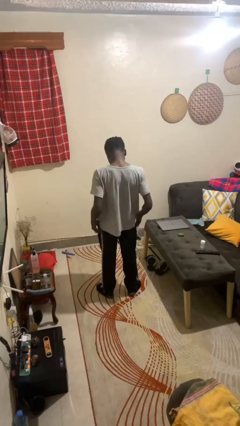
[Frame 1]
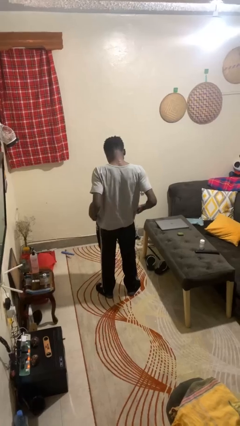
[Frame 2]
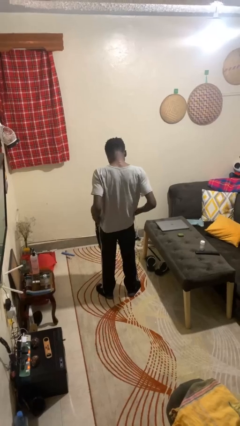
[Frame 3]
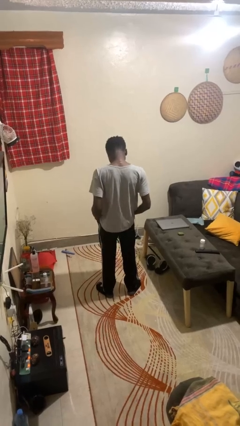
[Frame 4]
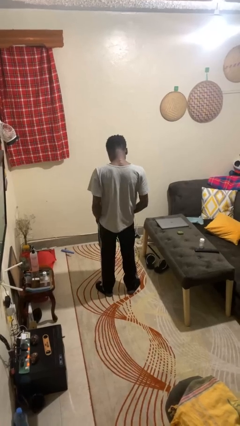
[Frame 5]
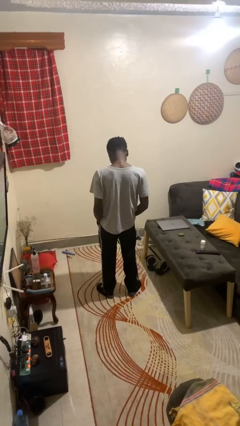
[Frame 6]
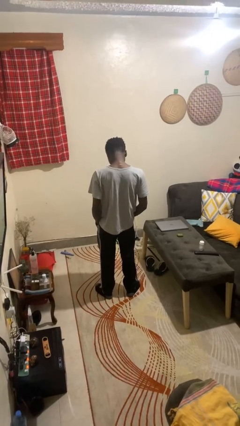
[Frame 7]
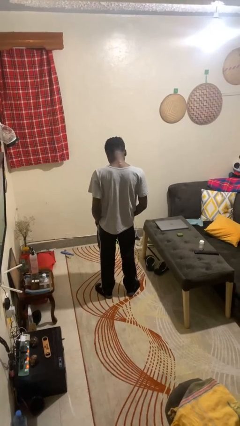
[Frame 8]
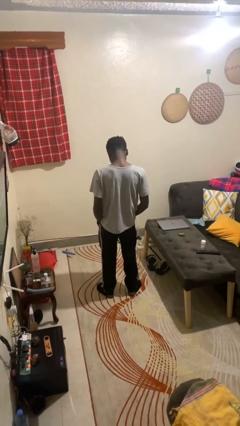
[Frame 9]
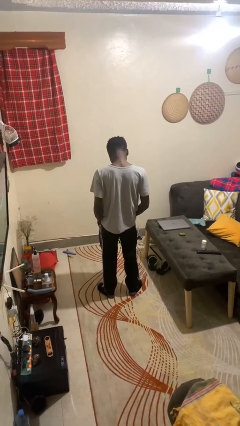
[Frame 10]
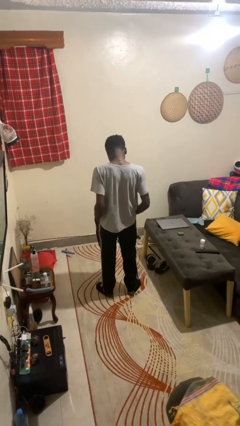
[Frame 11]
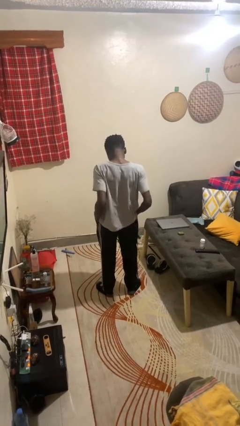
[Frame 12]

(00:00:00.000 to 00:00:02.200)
person puts hands in back pockets

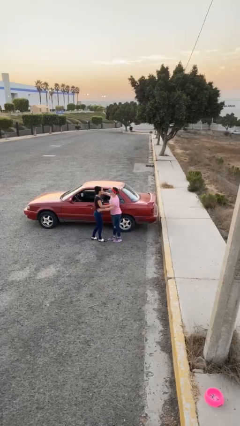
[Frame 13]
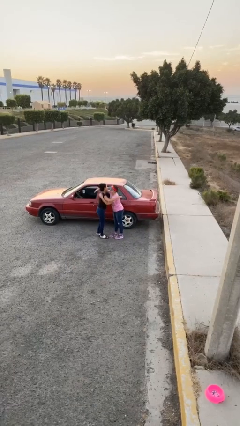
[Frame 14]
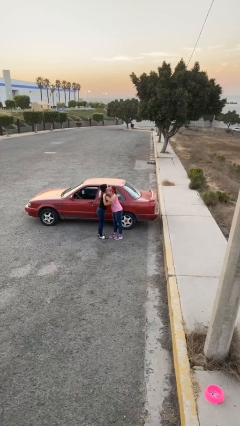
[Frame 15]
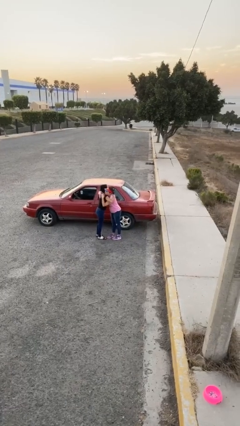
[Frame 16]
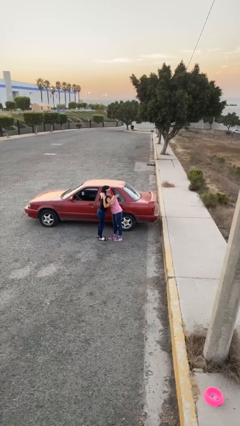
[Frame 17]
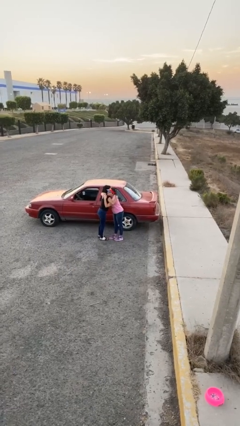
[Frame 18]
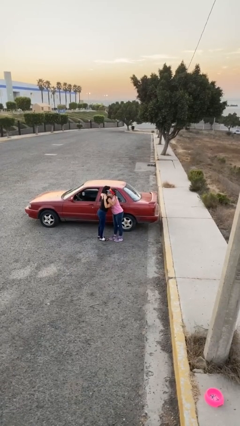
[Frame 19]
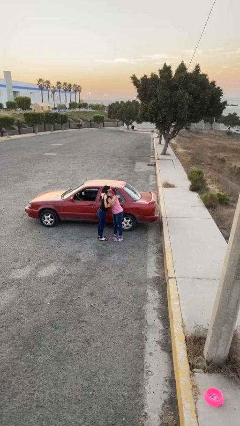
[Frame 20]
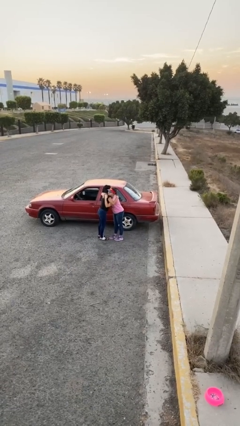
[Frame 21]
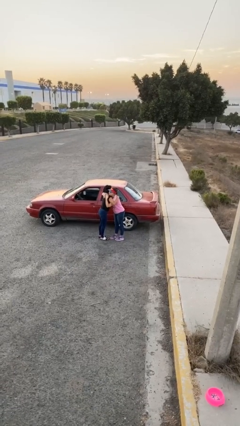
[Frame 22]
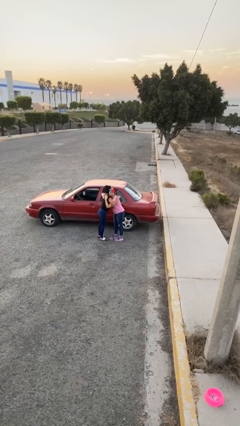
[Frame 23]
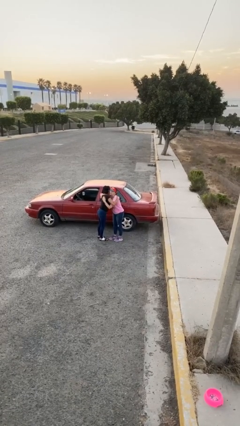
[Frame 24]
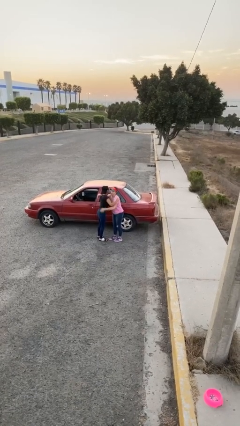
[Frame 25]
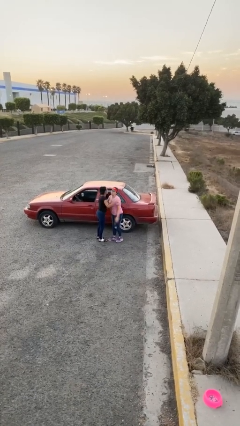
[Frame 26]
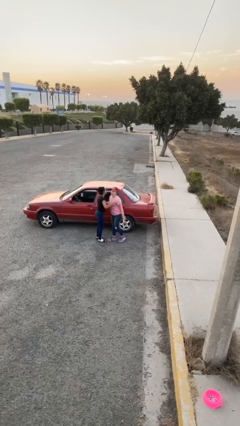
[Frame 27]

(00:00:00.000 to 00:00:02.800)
person embraces person

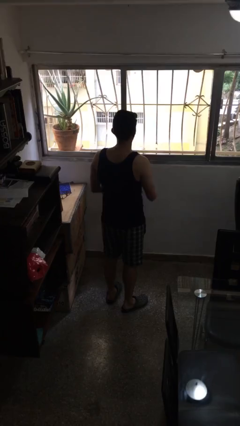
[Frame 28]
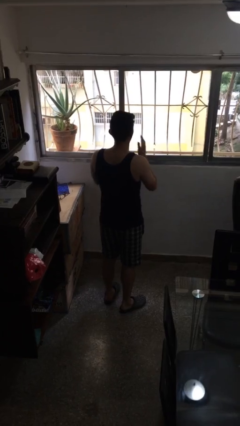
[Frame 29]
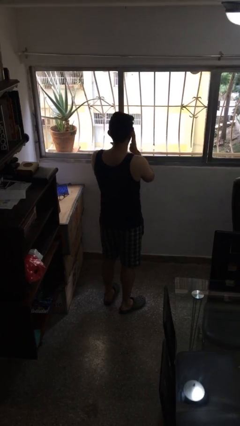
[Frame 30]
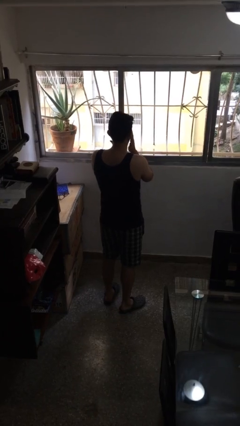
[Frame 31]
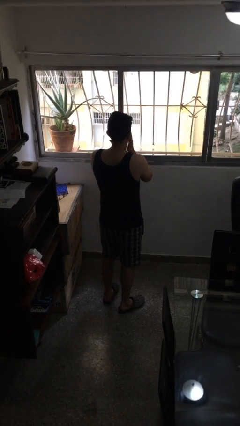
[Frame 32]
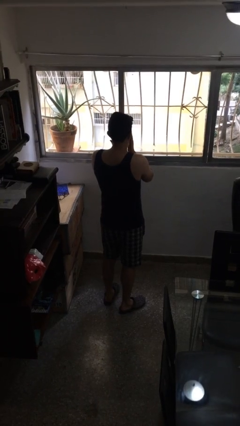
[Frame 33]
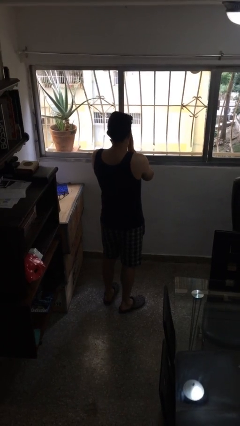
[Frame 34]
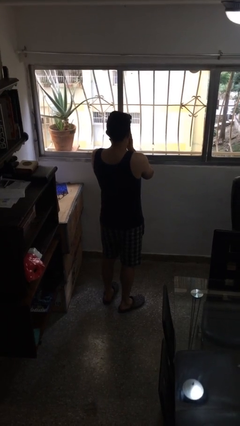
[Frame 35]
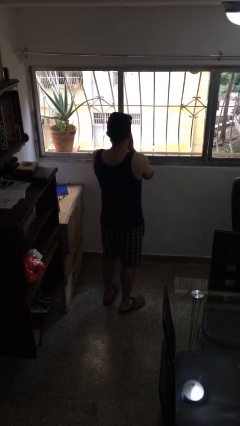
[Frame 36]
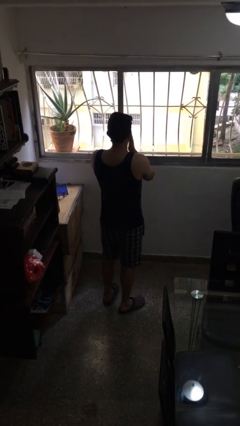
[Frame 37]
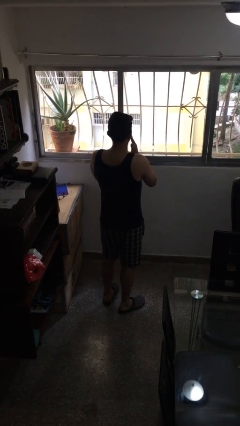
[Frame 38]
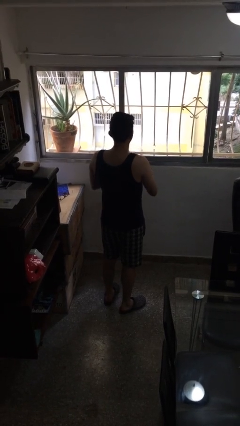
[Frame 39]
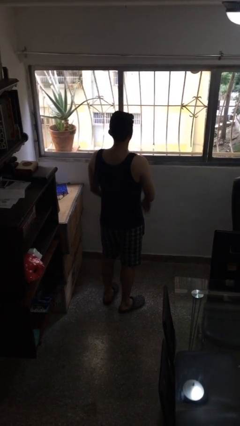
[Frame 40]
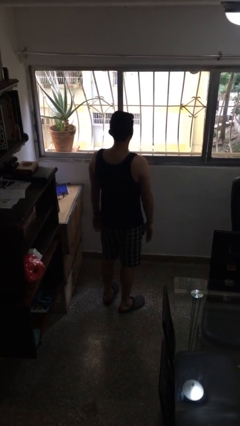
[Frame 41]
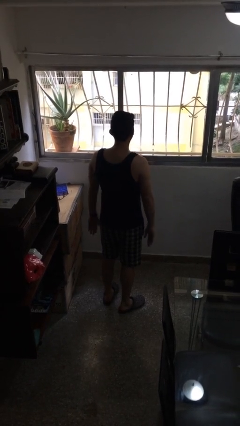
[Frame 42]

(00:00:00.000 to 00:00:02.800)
person rubs eyes

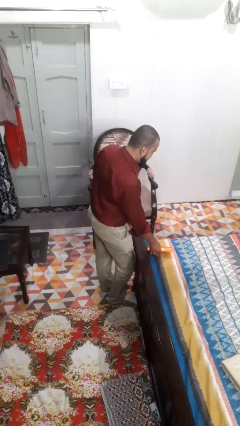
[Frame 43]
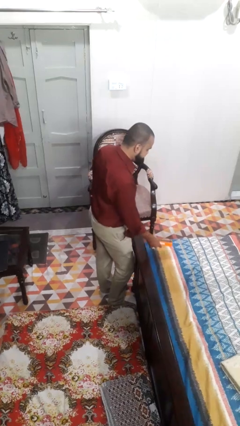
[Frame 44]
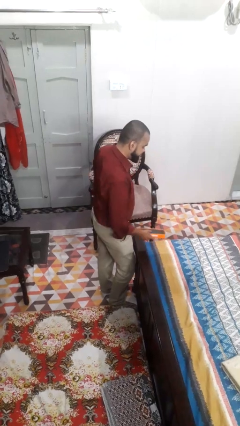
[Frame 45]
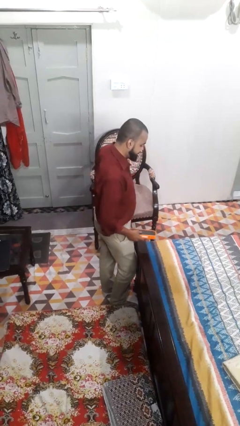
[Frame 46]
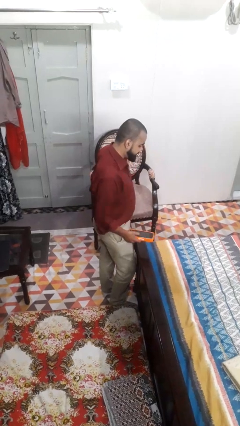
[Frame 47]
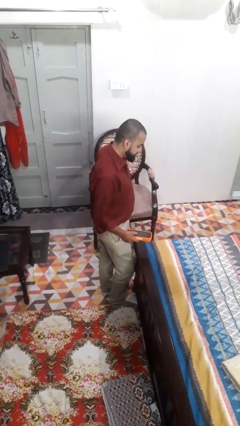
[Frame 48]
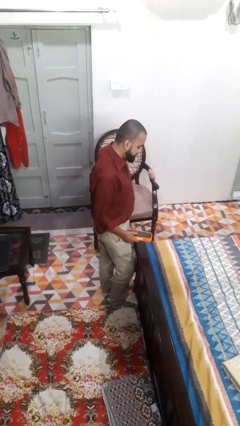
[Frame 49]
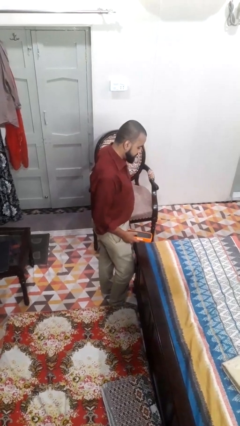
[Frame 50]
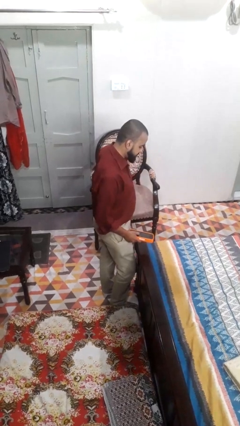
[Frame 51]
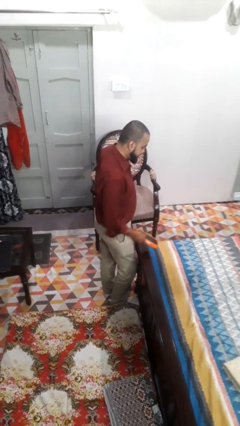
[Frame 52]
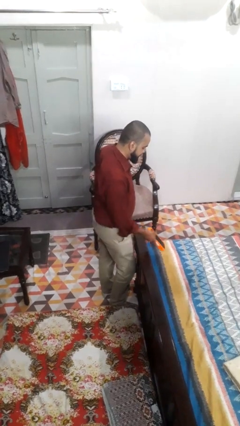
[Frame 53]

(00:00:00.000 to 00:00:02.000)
person picks up object from bed

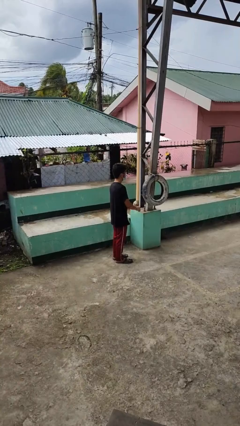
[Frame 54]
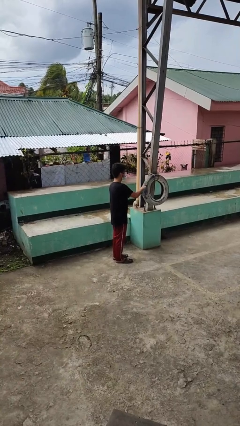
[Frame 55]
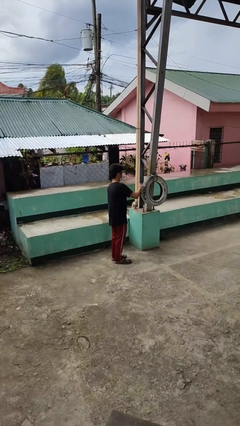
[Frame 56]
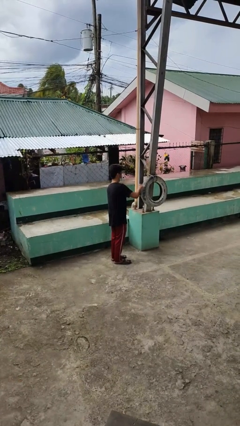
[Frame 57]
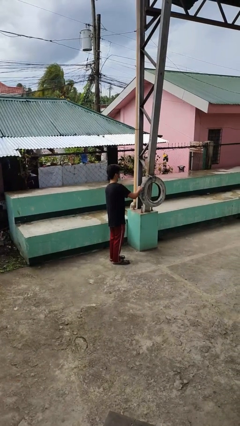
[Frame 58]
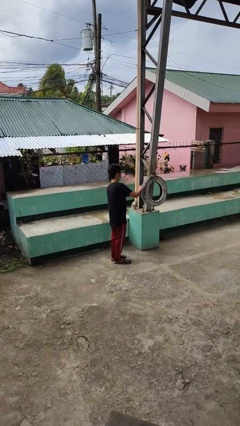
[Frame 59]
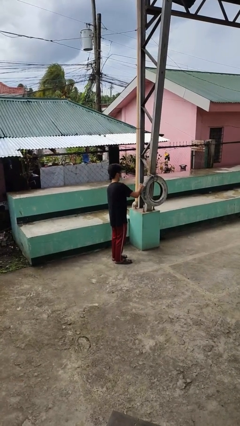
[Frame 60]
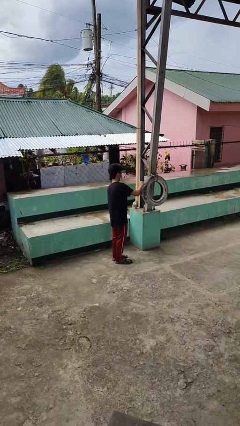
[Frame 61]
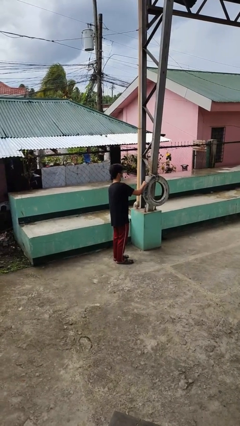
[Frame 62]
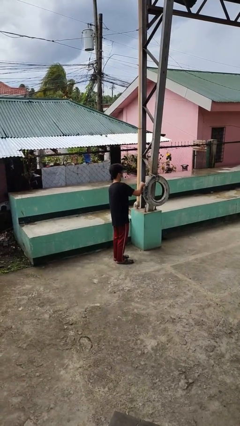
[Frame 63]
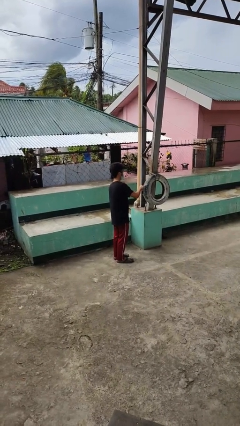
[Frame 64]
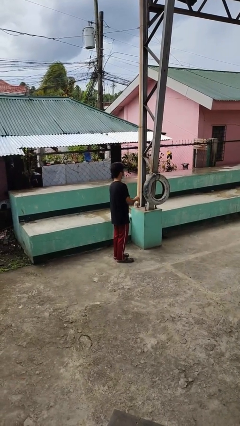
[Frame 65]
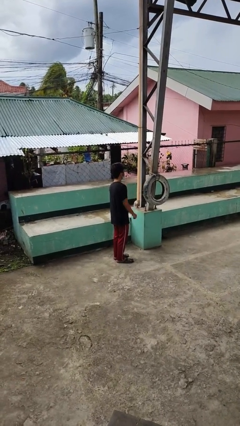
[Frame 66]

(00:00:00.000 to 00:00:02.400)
person taps object with finger

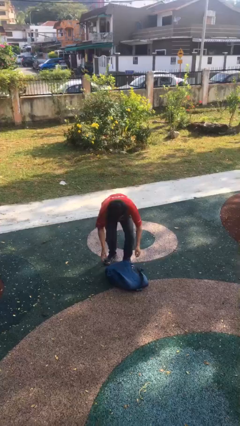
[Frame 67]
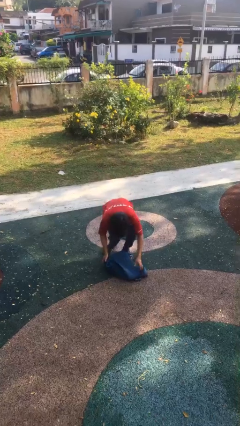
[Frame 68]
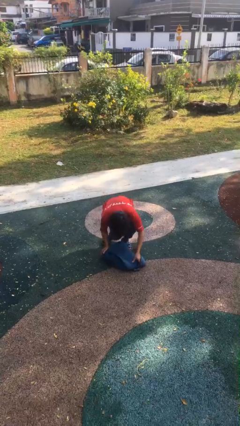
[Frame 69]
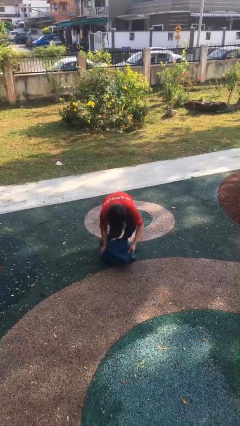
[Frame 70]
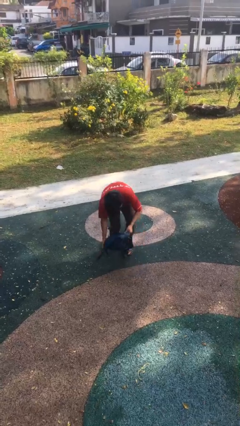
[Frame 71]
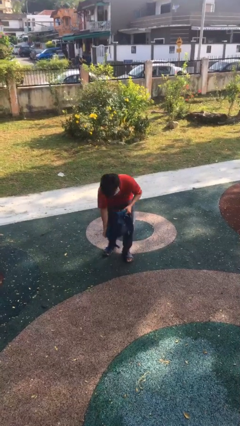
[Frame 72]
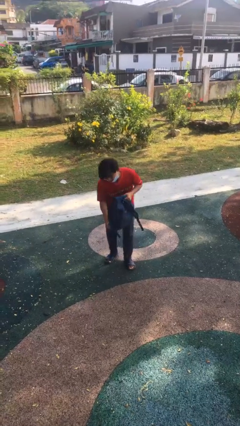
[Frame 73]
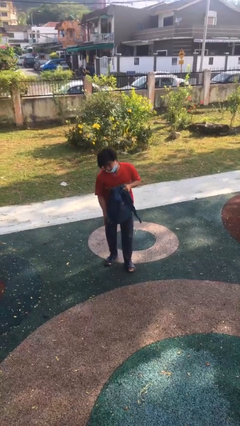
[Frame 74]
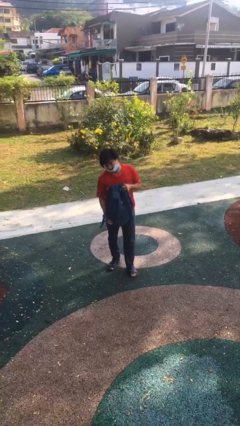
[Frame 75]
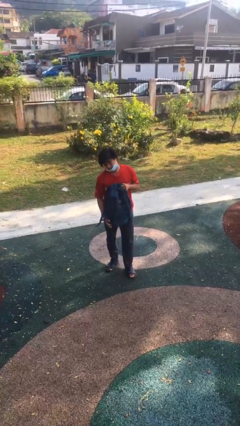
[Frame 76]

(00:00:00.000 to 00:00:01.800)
person picks up object from floor

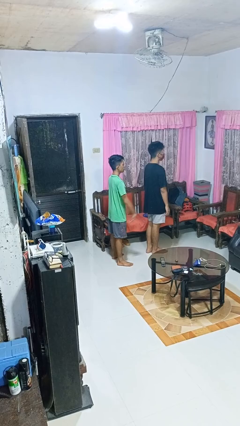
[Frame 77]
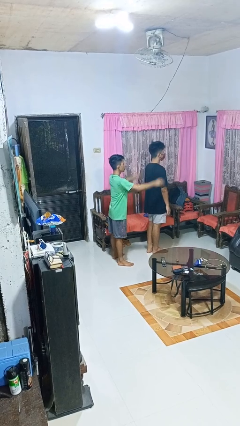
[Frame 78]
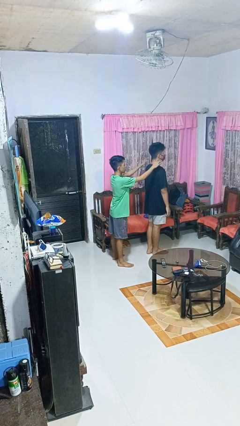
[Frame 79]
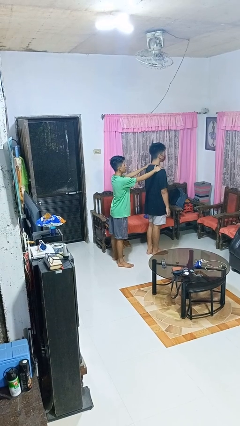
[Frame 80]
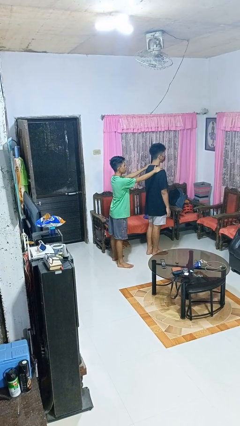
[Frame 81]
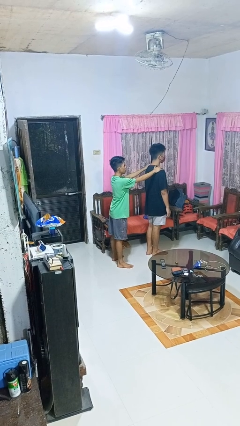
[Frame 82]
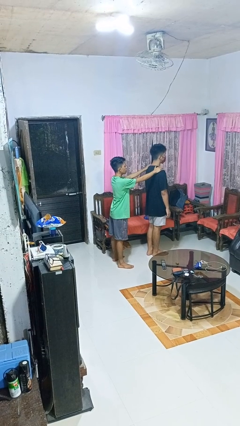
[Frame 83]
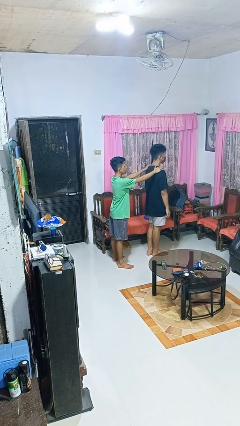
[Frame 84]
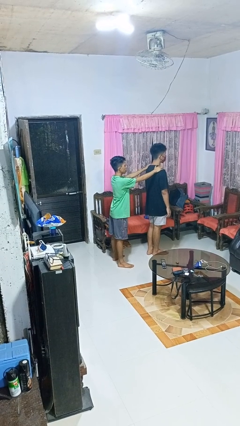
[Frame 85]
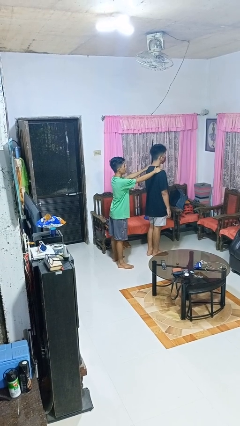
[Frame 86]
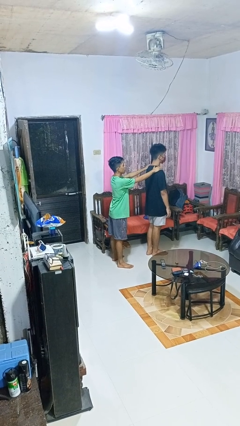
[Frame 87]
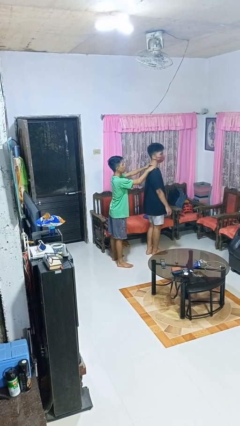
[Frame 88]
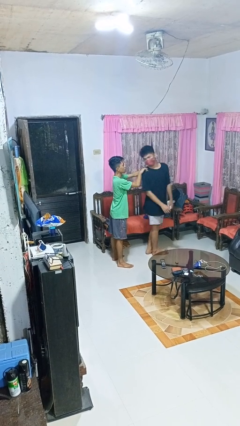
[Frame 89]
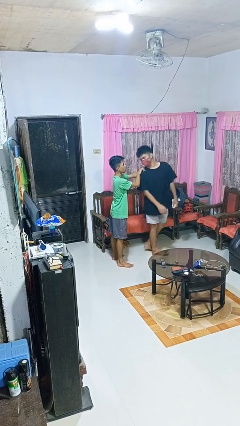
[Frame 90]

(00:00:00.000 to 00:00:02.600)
person grabs person by shoulder

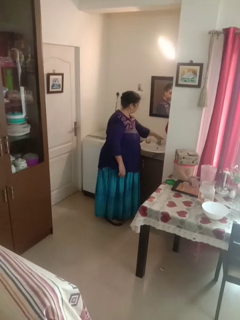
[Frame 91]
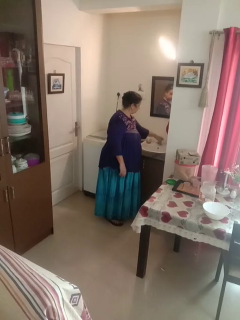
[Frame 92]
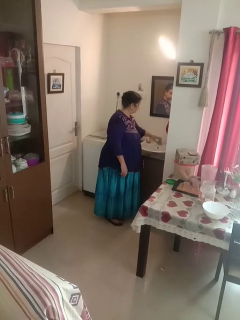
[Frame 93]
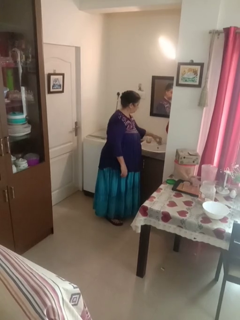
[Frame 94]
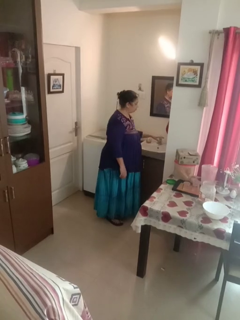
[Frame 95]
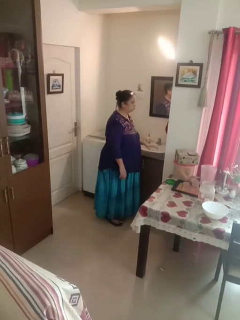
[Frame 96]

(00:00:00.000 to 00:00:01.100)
person turns off faucet
